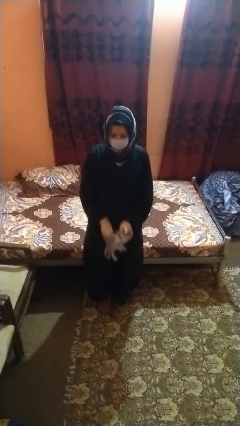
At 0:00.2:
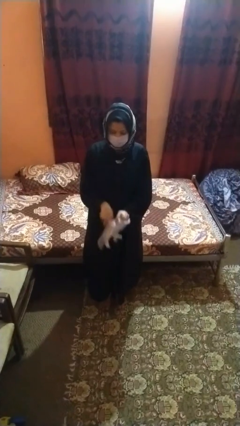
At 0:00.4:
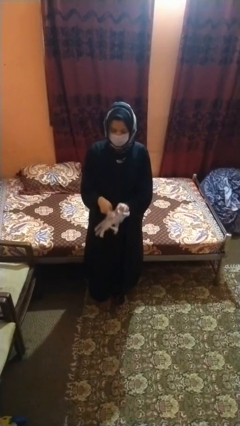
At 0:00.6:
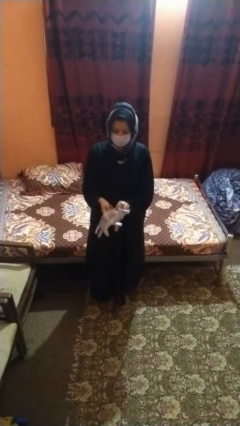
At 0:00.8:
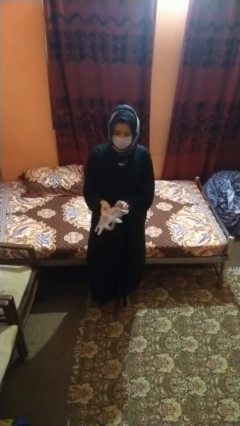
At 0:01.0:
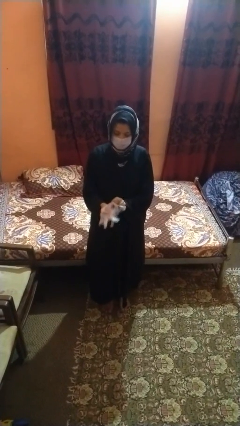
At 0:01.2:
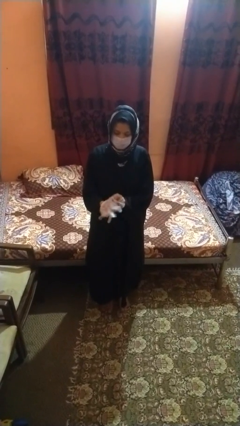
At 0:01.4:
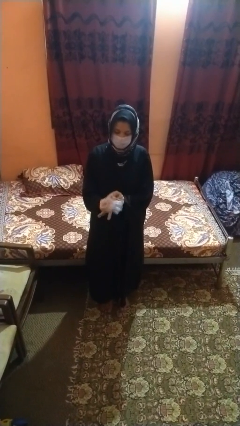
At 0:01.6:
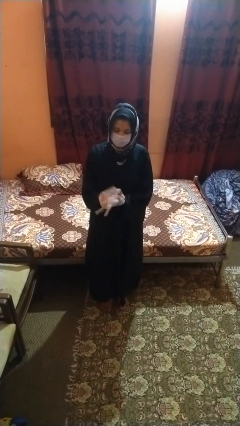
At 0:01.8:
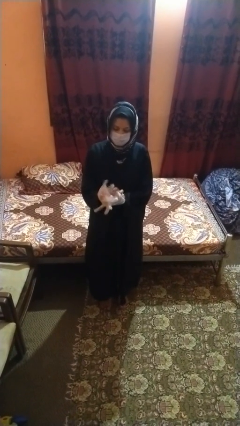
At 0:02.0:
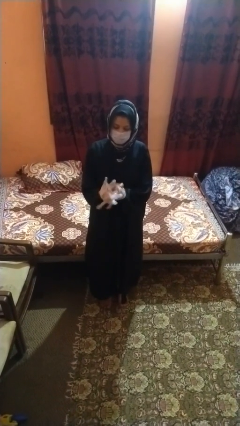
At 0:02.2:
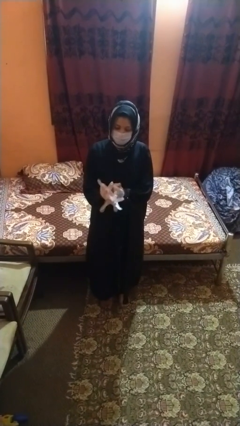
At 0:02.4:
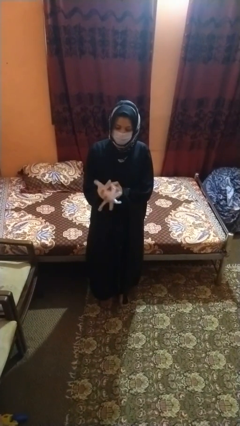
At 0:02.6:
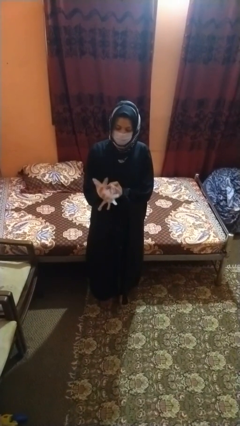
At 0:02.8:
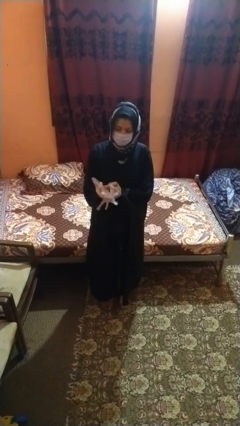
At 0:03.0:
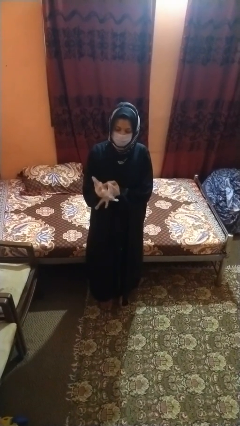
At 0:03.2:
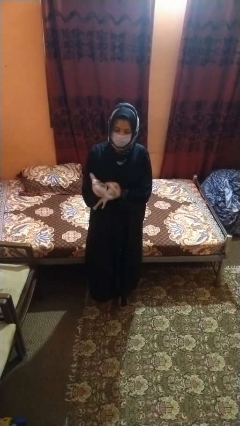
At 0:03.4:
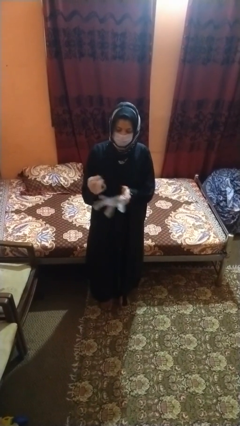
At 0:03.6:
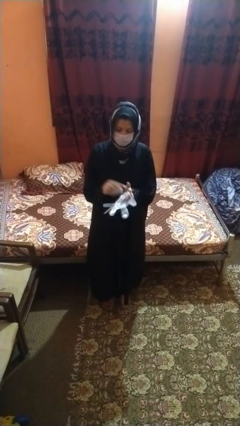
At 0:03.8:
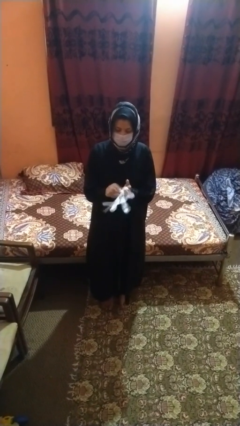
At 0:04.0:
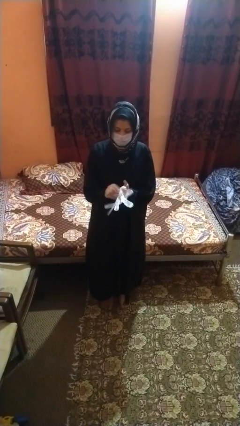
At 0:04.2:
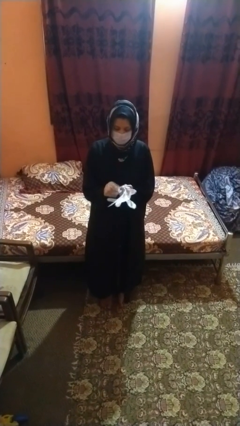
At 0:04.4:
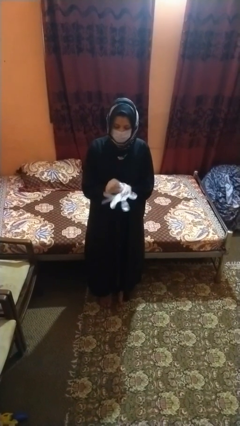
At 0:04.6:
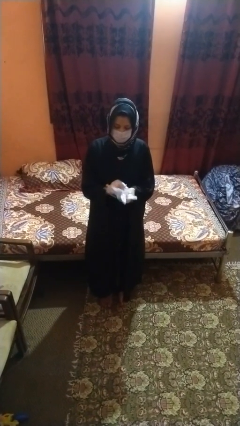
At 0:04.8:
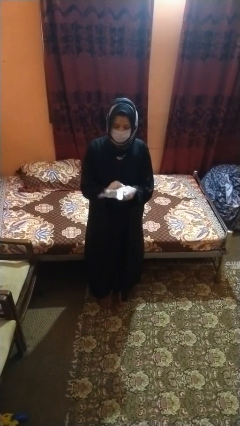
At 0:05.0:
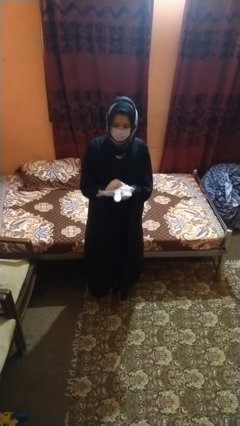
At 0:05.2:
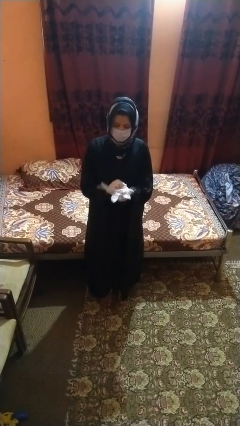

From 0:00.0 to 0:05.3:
person puts on gloves

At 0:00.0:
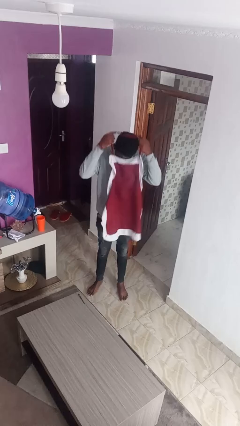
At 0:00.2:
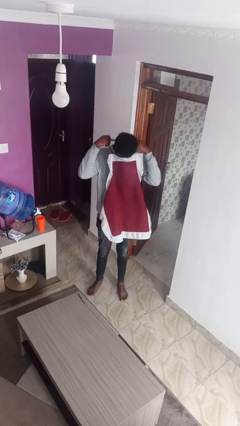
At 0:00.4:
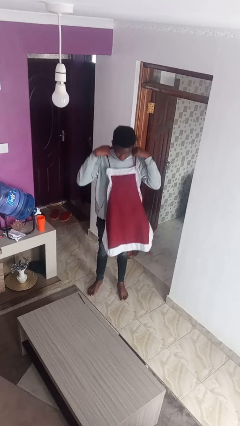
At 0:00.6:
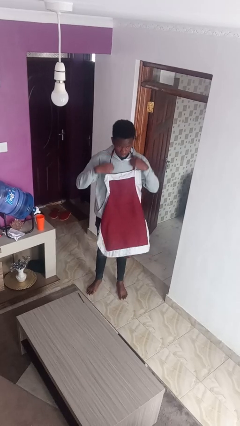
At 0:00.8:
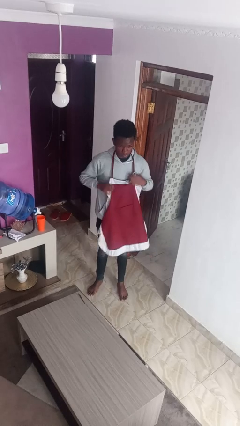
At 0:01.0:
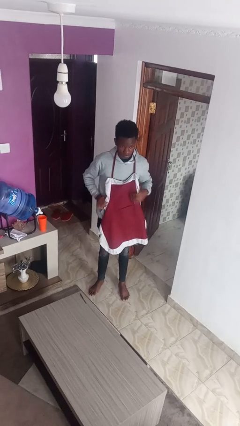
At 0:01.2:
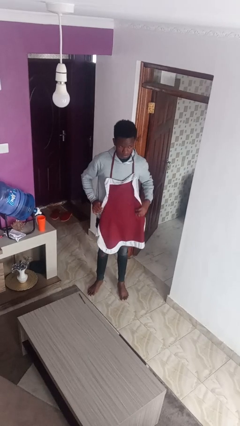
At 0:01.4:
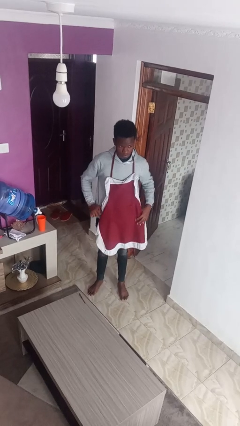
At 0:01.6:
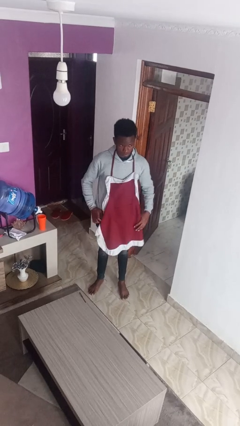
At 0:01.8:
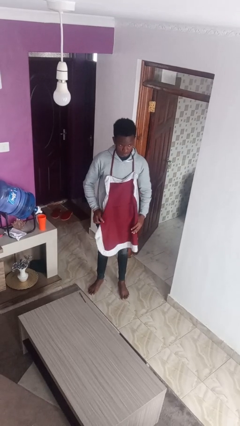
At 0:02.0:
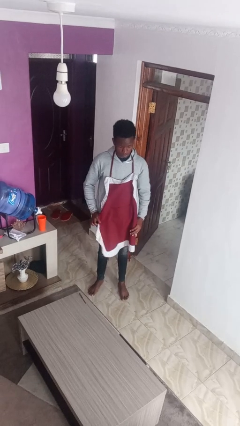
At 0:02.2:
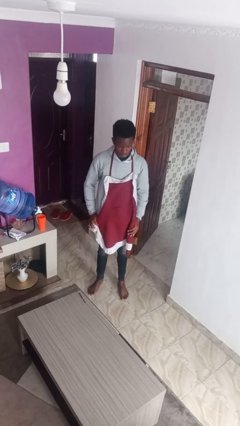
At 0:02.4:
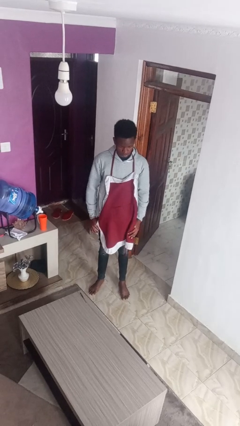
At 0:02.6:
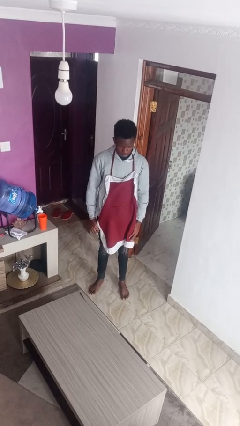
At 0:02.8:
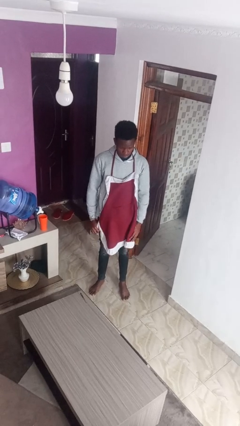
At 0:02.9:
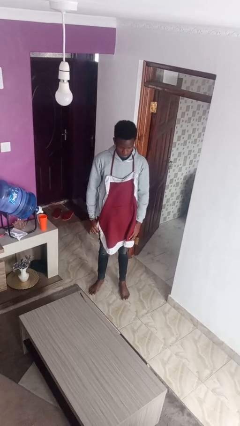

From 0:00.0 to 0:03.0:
person puts on apron

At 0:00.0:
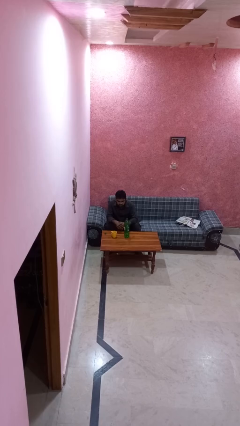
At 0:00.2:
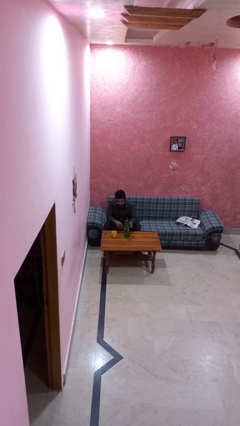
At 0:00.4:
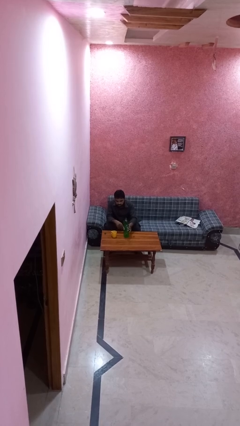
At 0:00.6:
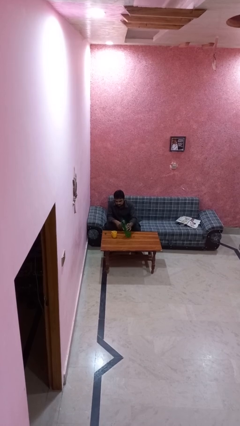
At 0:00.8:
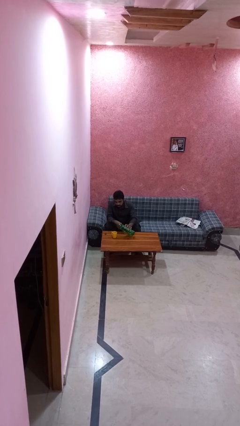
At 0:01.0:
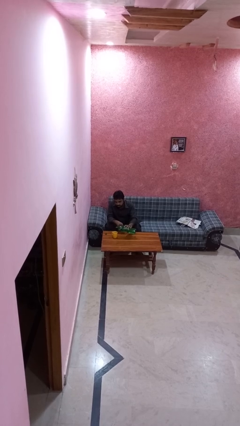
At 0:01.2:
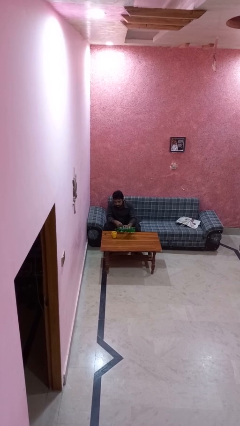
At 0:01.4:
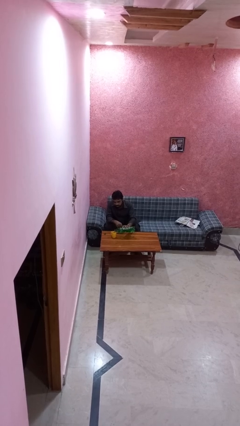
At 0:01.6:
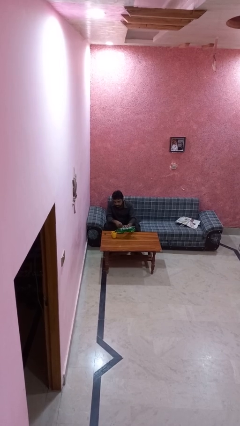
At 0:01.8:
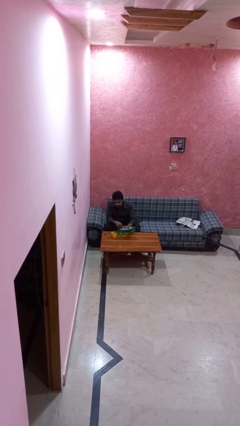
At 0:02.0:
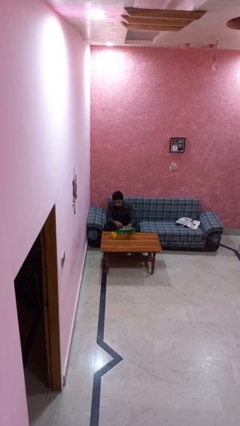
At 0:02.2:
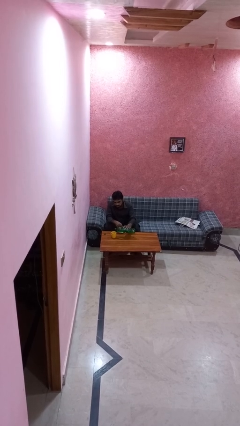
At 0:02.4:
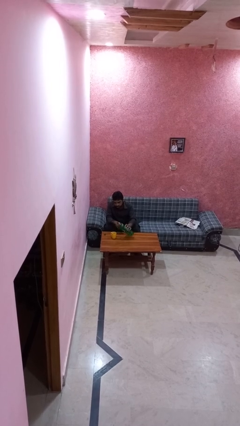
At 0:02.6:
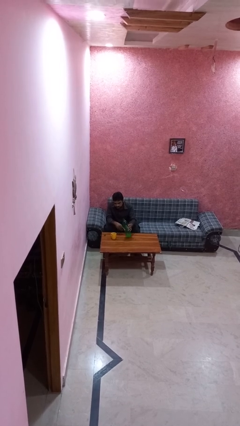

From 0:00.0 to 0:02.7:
person pours liquid into cup

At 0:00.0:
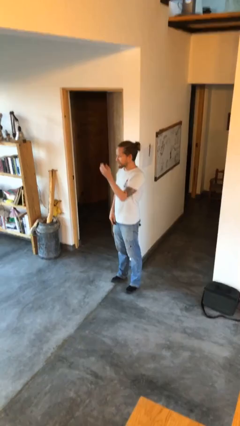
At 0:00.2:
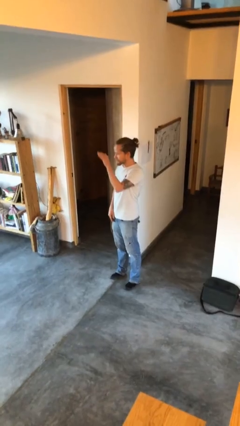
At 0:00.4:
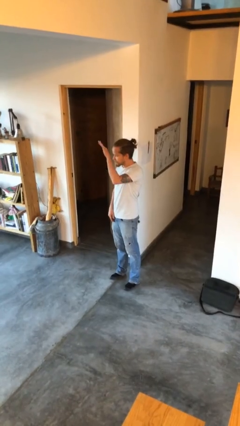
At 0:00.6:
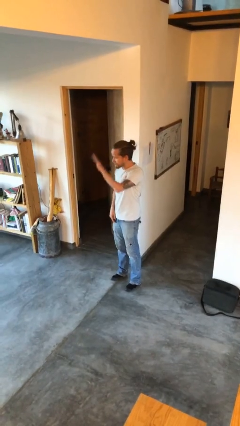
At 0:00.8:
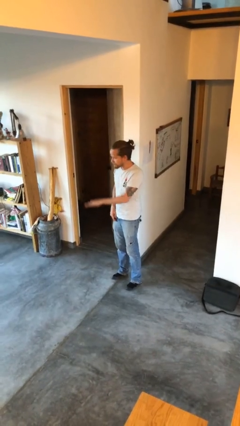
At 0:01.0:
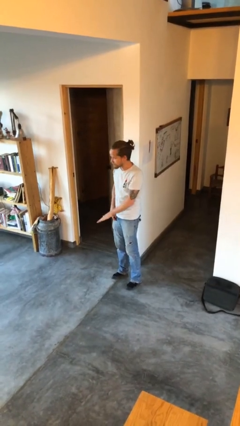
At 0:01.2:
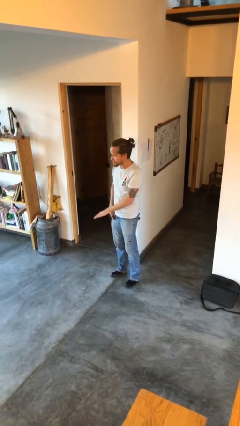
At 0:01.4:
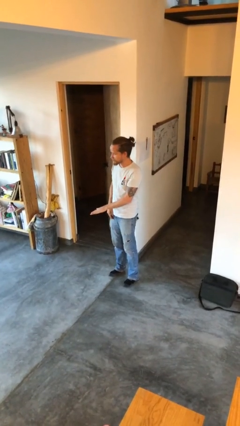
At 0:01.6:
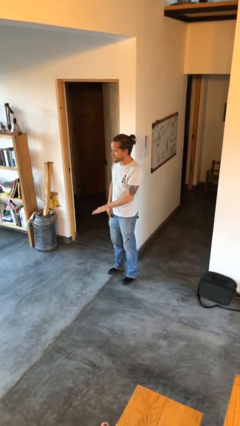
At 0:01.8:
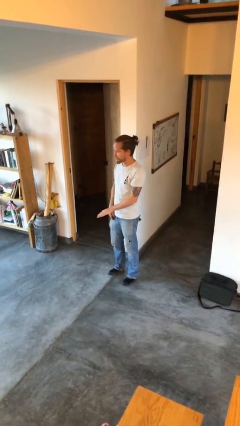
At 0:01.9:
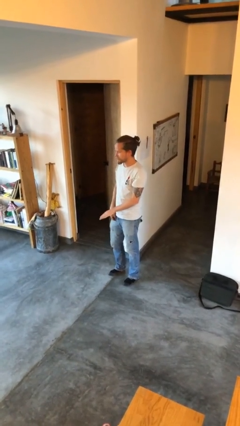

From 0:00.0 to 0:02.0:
person gestures swipe down

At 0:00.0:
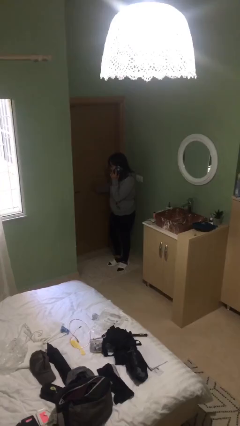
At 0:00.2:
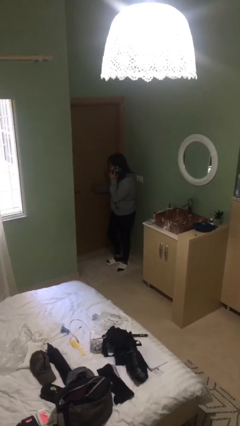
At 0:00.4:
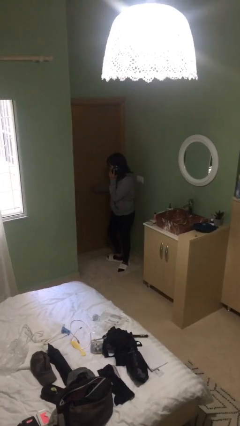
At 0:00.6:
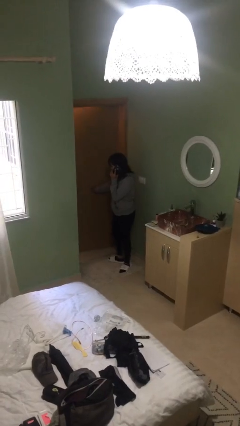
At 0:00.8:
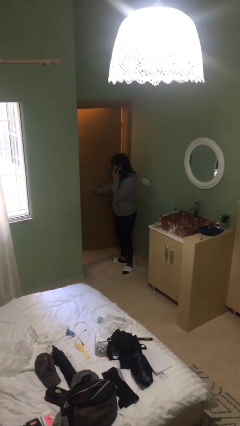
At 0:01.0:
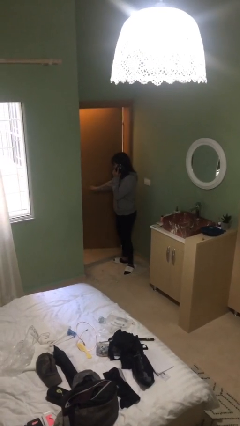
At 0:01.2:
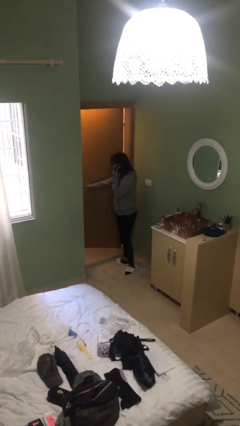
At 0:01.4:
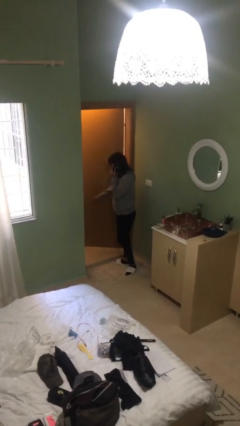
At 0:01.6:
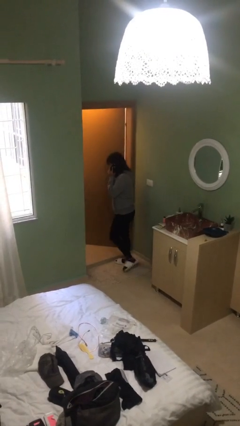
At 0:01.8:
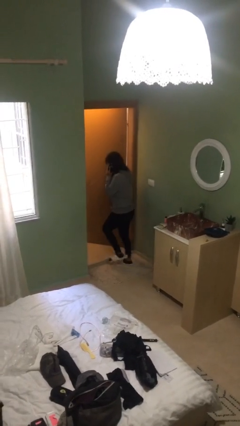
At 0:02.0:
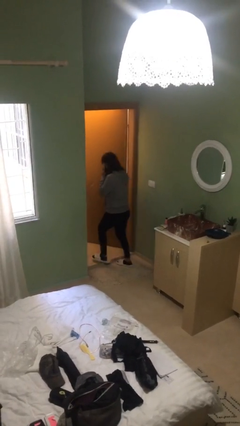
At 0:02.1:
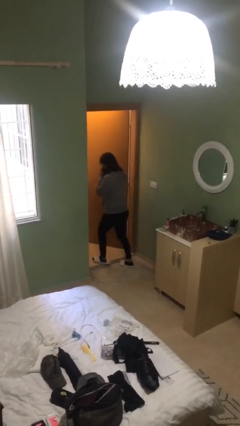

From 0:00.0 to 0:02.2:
person opens facility door

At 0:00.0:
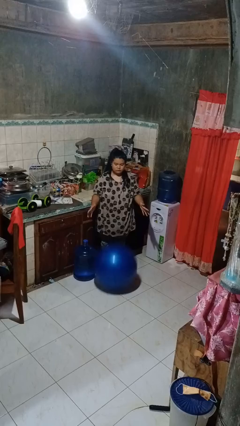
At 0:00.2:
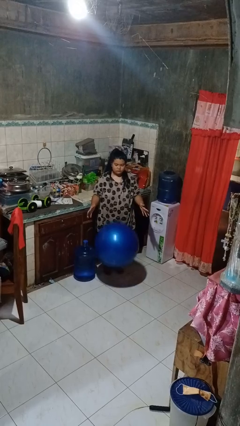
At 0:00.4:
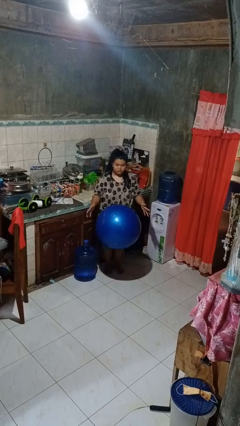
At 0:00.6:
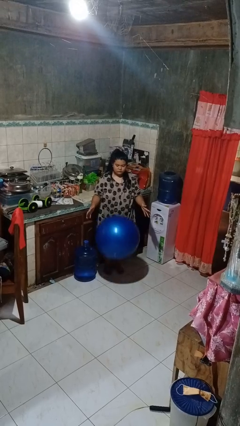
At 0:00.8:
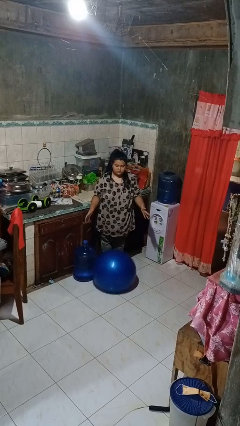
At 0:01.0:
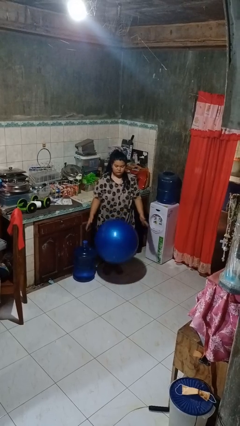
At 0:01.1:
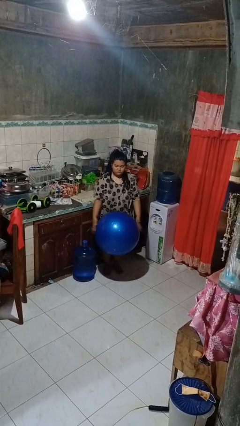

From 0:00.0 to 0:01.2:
person bounces ball on floor

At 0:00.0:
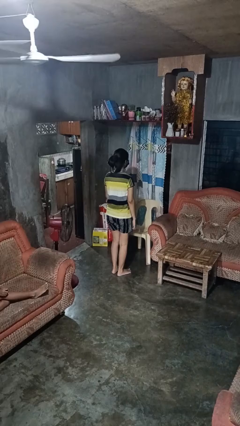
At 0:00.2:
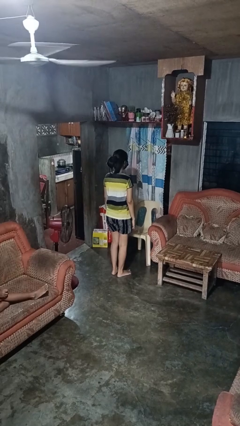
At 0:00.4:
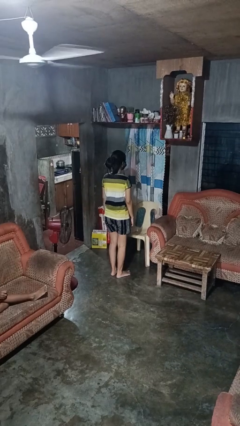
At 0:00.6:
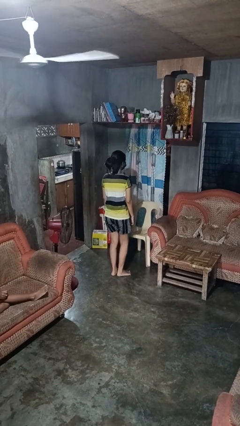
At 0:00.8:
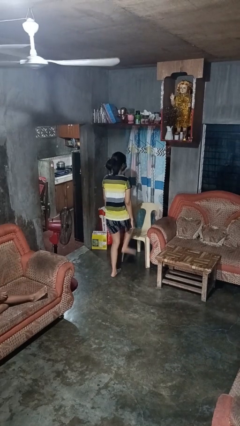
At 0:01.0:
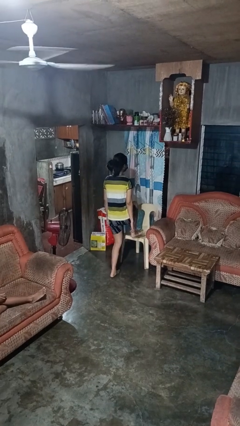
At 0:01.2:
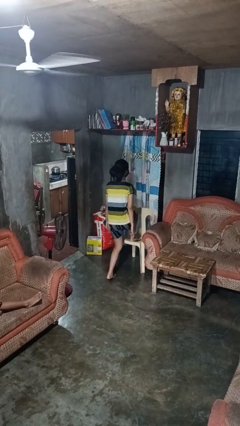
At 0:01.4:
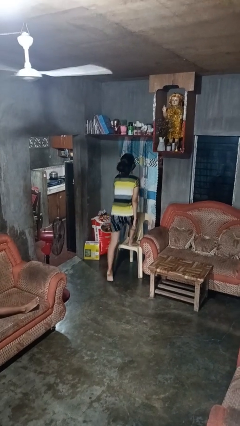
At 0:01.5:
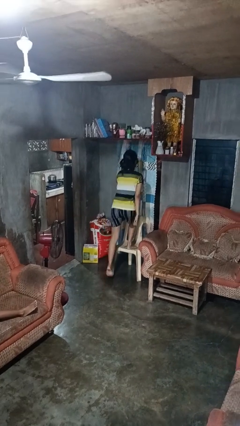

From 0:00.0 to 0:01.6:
person climbs on chair
